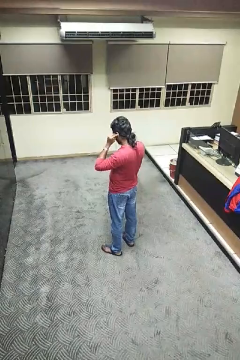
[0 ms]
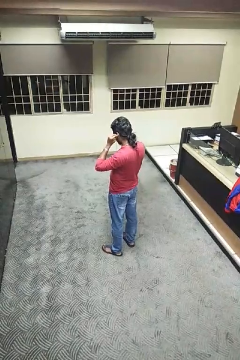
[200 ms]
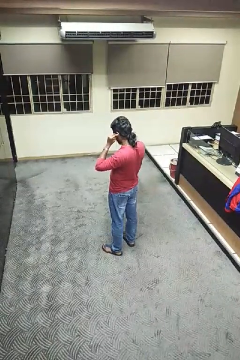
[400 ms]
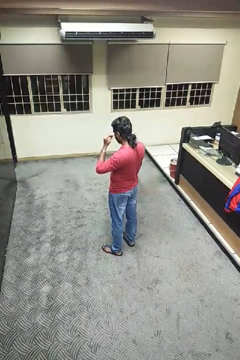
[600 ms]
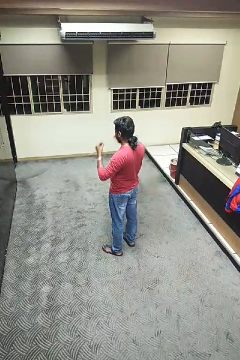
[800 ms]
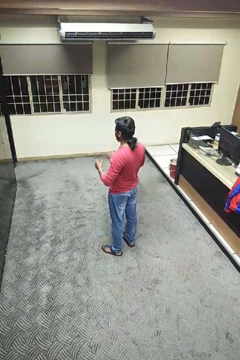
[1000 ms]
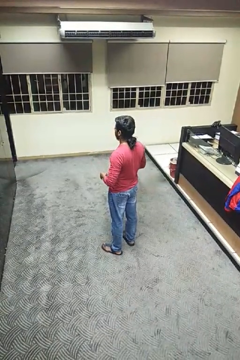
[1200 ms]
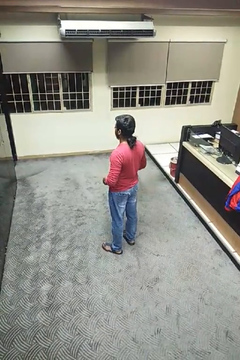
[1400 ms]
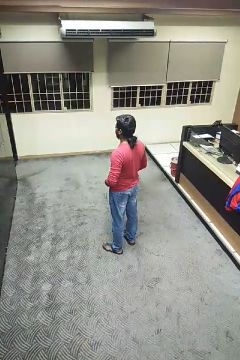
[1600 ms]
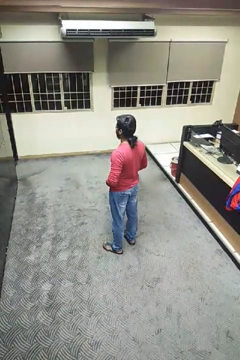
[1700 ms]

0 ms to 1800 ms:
person takes off headphones

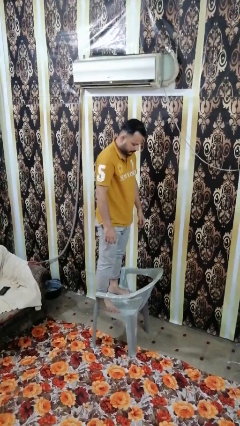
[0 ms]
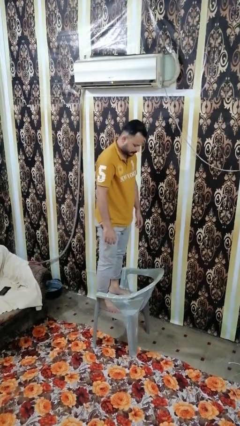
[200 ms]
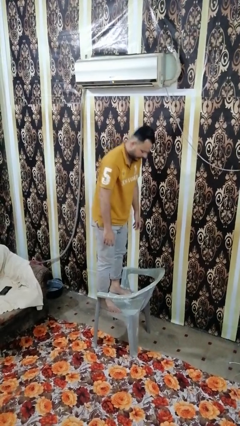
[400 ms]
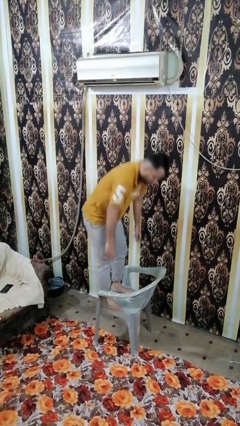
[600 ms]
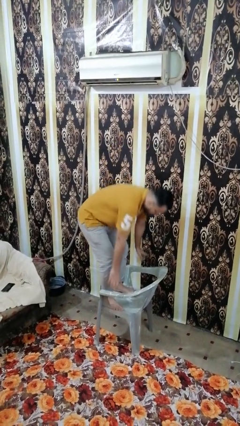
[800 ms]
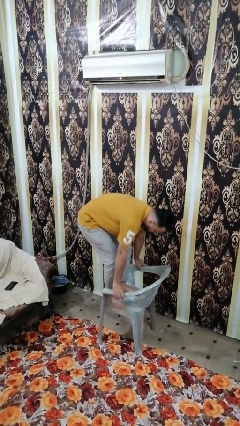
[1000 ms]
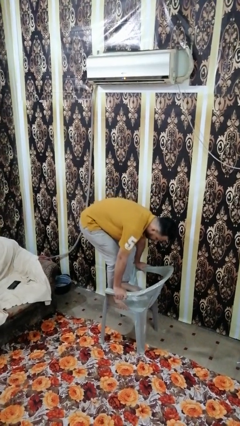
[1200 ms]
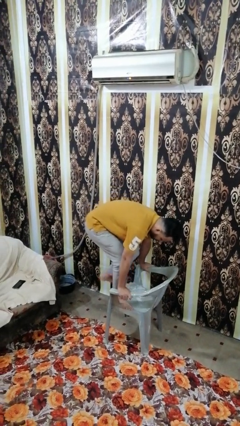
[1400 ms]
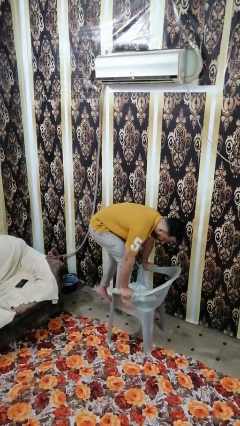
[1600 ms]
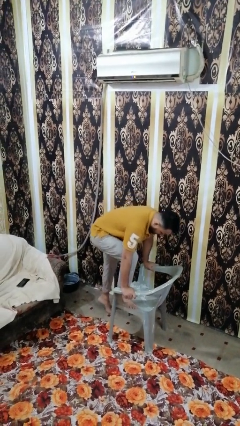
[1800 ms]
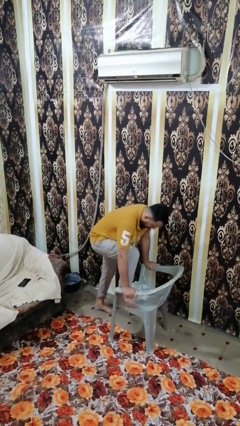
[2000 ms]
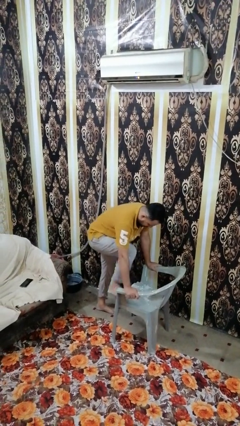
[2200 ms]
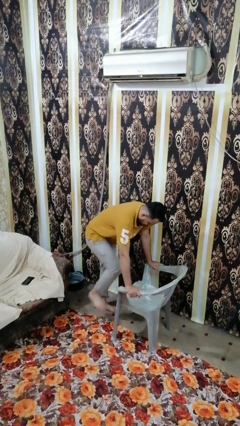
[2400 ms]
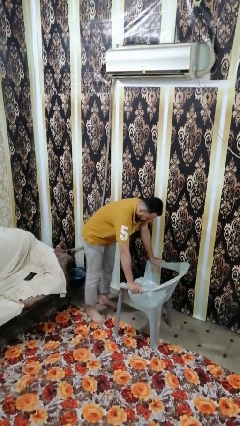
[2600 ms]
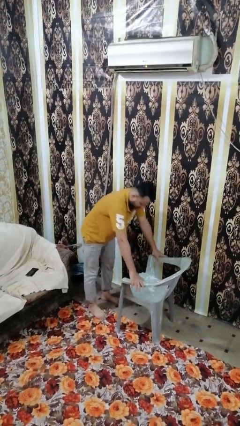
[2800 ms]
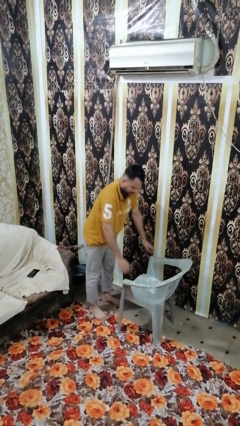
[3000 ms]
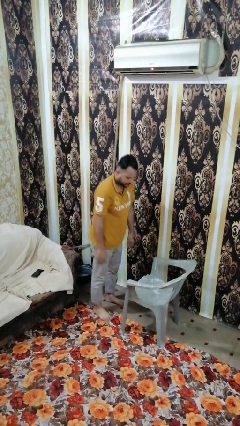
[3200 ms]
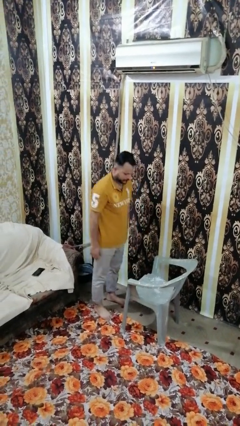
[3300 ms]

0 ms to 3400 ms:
person climbs off chair

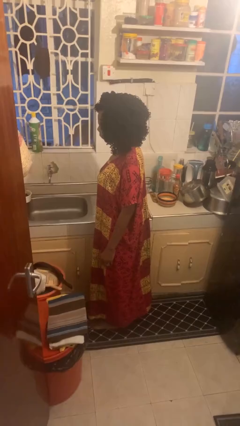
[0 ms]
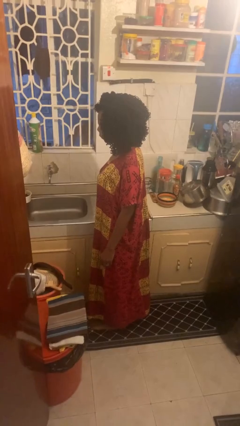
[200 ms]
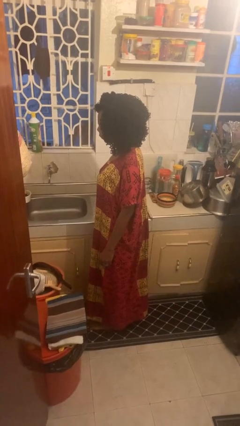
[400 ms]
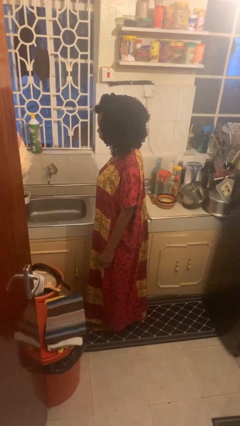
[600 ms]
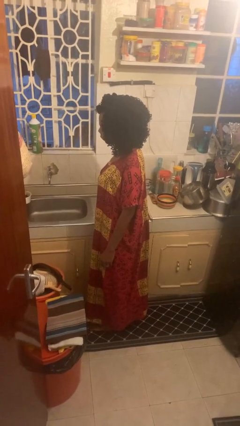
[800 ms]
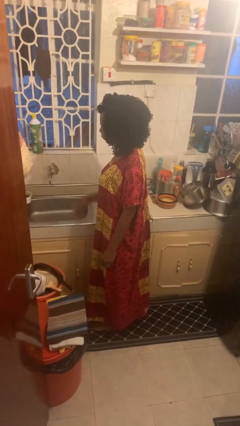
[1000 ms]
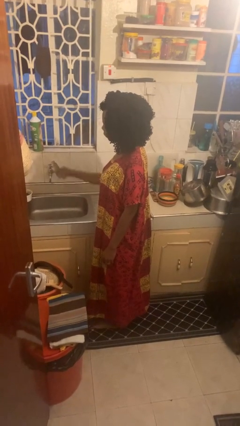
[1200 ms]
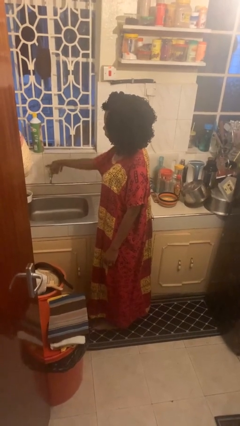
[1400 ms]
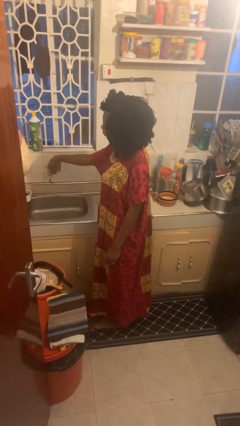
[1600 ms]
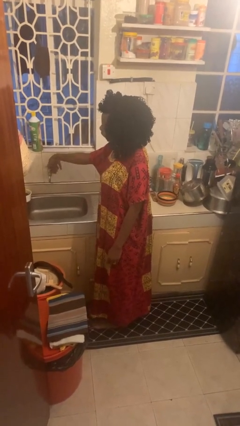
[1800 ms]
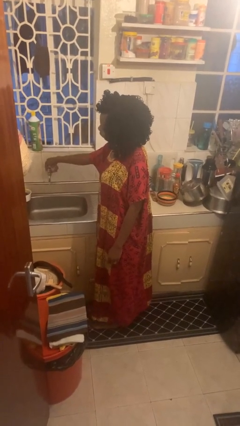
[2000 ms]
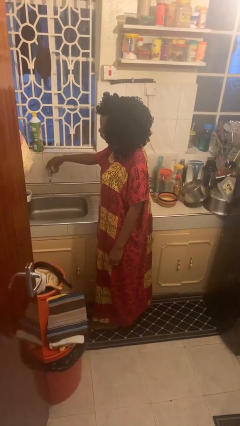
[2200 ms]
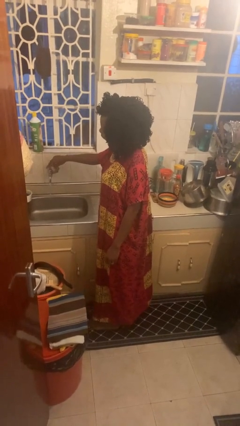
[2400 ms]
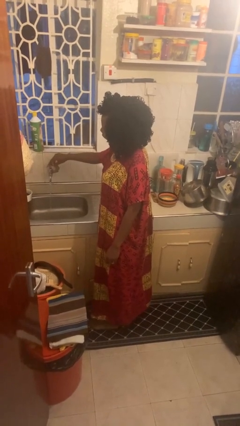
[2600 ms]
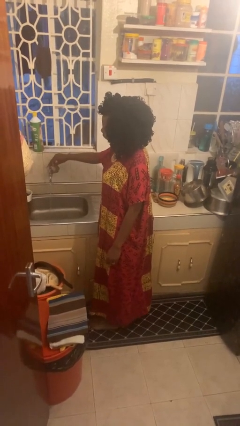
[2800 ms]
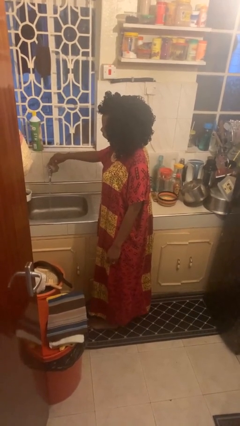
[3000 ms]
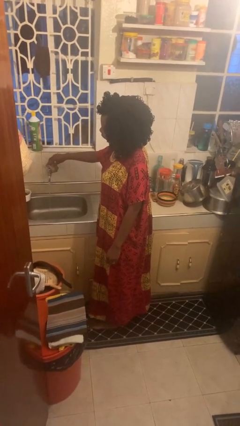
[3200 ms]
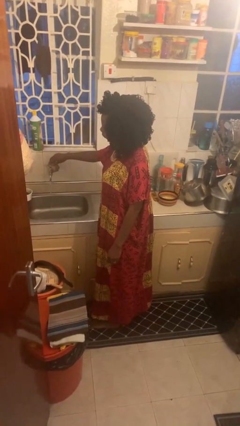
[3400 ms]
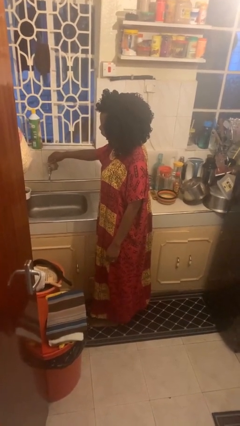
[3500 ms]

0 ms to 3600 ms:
person turns on faucet

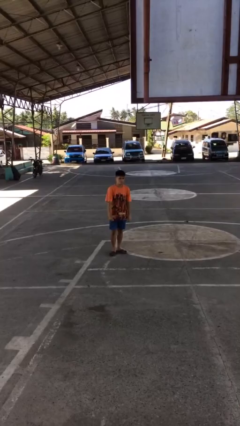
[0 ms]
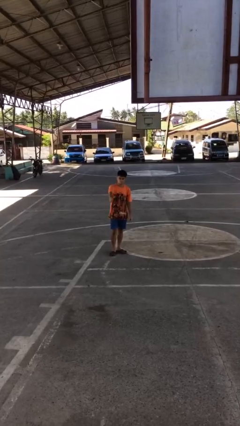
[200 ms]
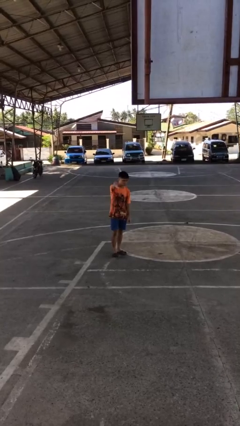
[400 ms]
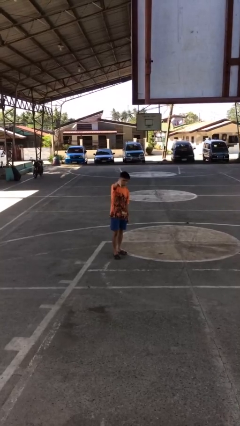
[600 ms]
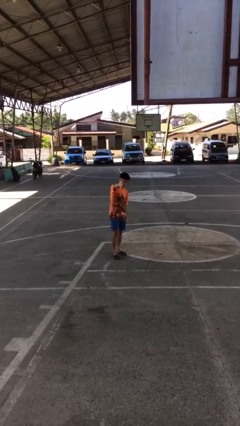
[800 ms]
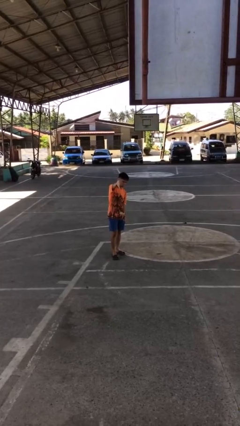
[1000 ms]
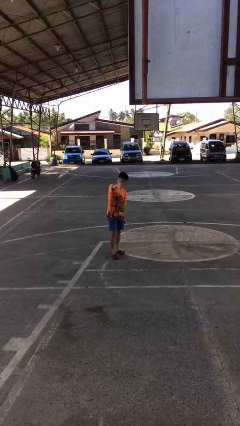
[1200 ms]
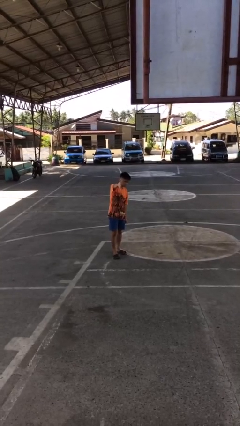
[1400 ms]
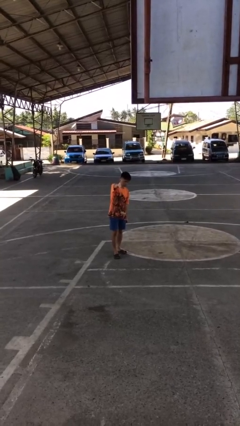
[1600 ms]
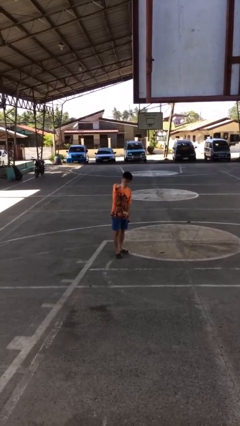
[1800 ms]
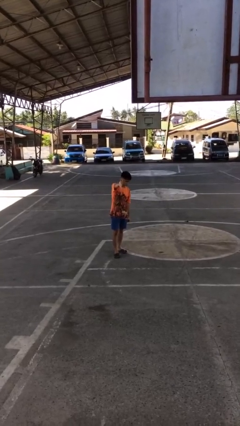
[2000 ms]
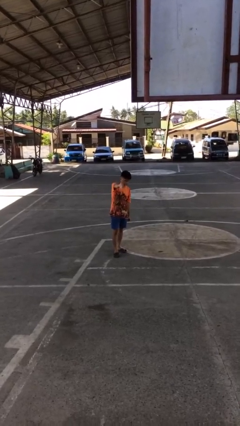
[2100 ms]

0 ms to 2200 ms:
person gestures thumbs down

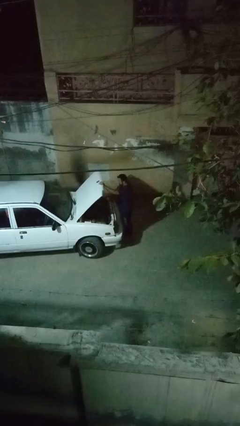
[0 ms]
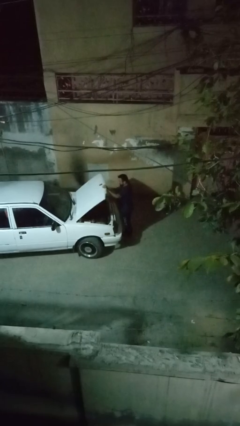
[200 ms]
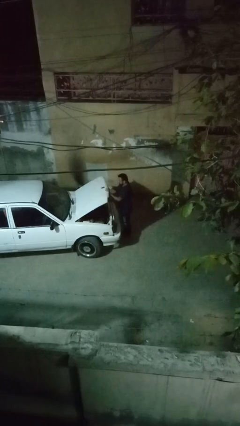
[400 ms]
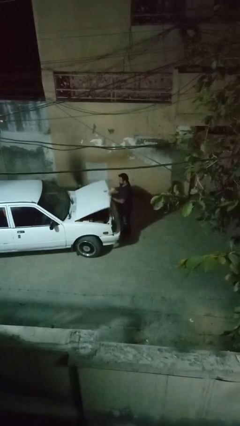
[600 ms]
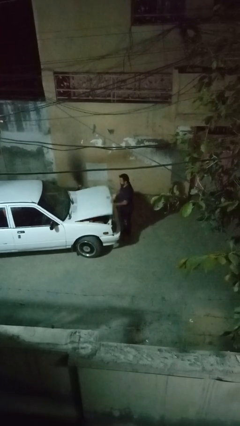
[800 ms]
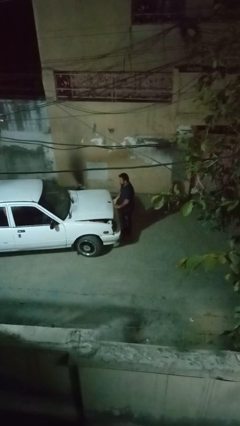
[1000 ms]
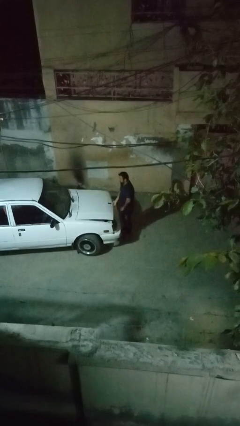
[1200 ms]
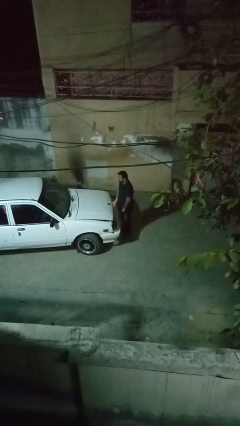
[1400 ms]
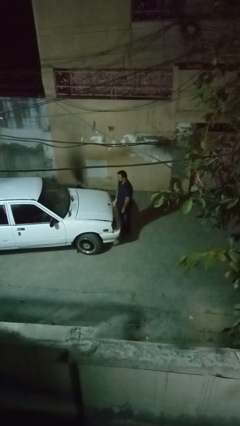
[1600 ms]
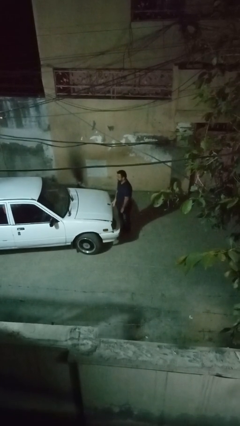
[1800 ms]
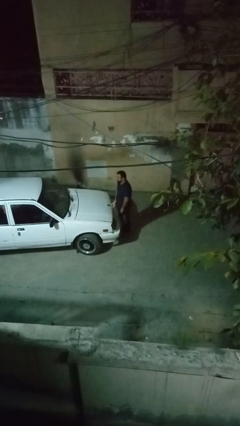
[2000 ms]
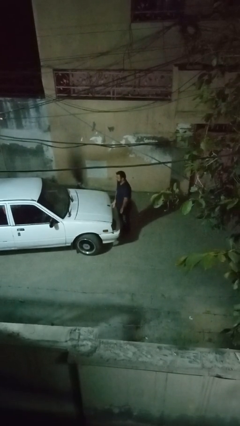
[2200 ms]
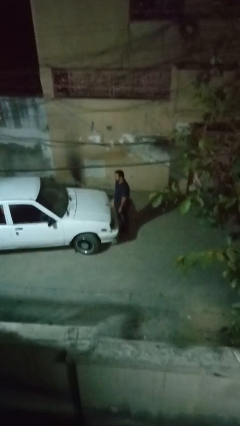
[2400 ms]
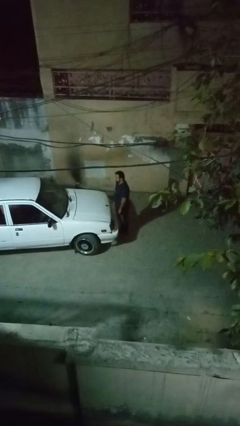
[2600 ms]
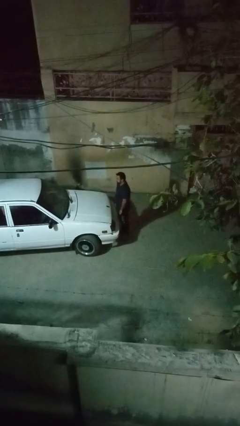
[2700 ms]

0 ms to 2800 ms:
person closes car hood

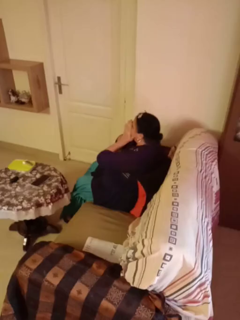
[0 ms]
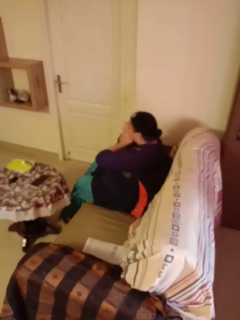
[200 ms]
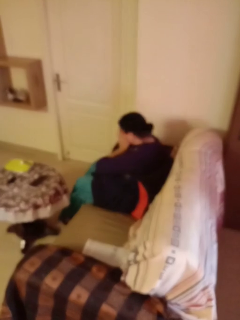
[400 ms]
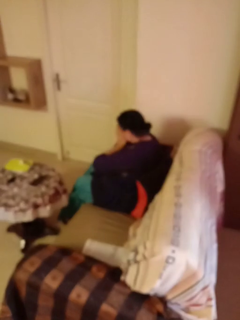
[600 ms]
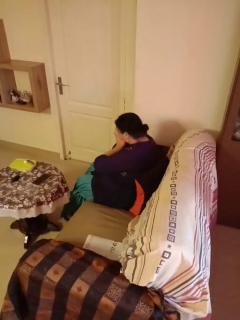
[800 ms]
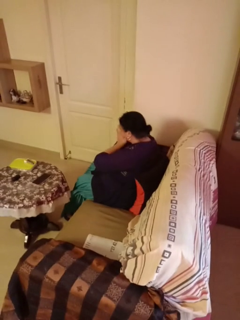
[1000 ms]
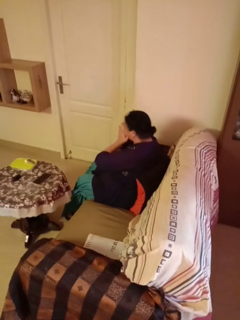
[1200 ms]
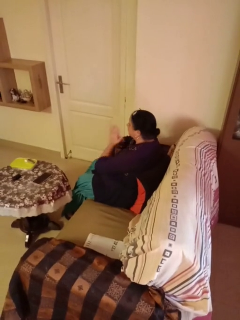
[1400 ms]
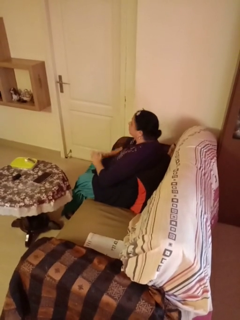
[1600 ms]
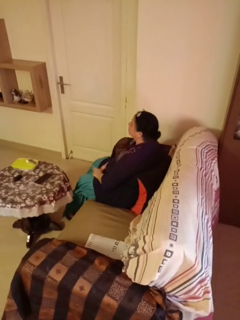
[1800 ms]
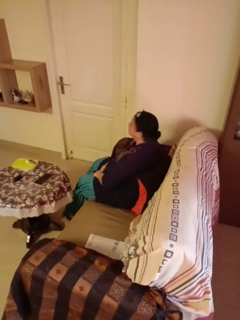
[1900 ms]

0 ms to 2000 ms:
person sneezes into hand

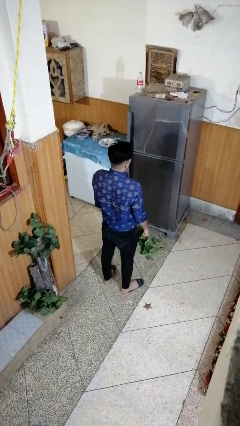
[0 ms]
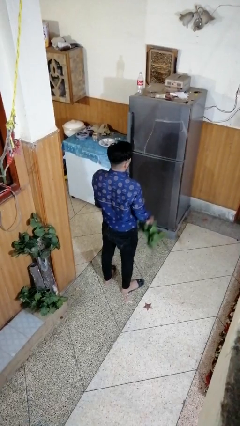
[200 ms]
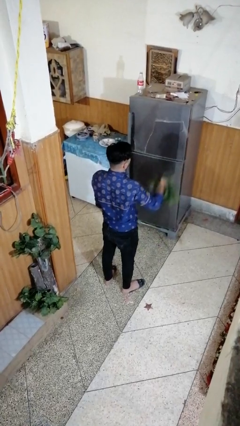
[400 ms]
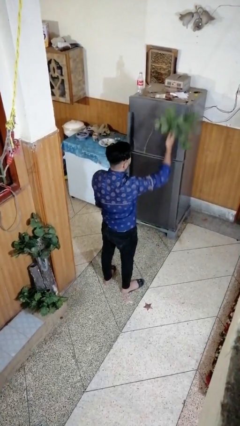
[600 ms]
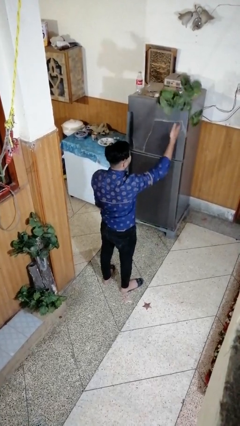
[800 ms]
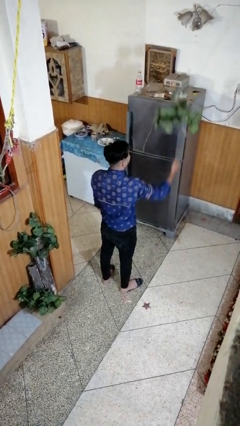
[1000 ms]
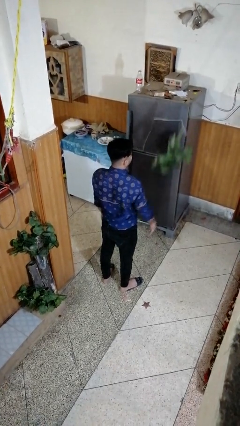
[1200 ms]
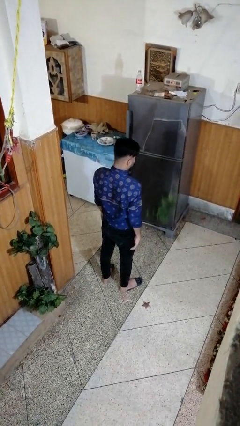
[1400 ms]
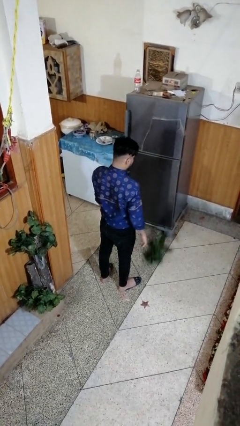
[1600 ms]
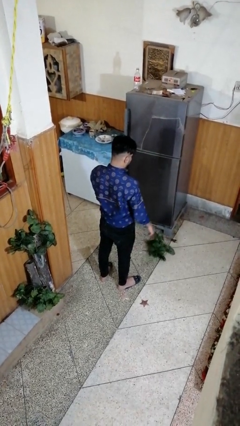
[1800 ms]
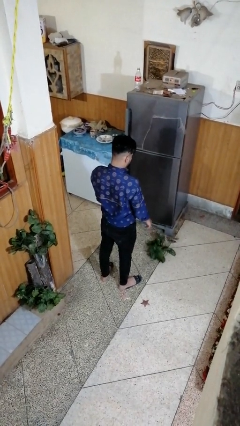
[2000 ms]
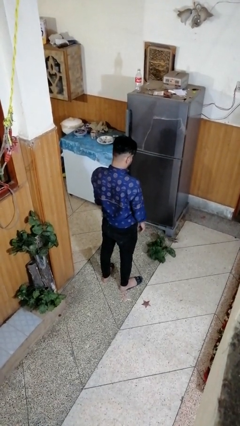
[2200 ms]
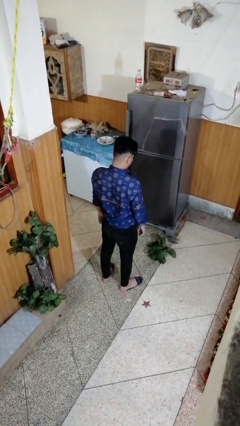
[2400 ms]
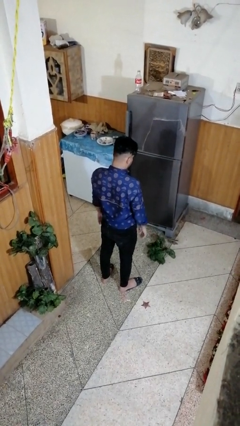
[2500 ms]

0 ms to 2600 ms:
person throws object into air
